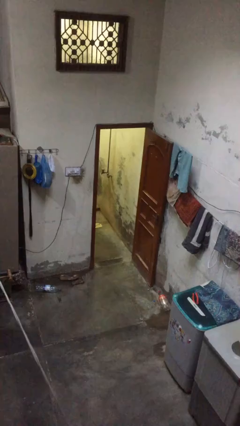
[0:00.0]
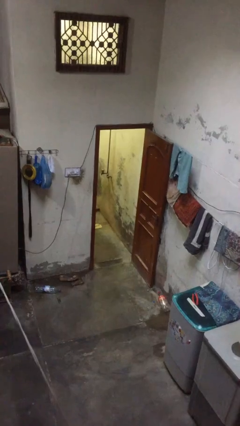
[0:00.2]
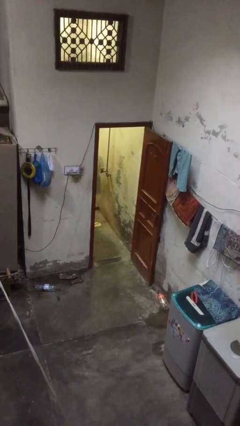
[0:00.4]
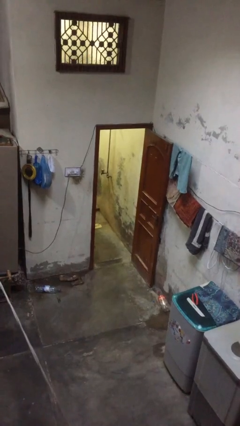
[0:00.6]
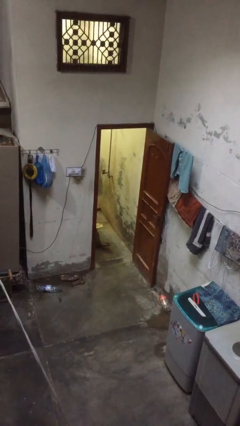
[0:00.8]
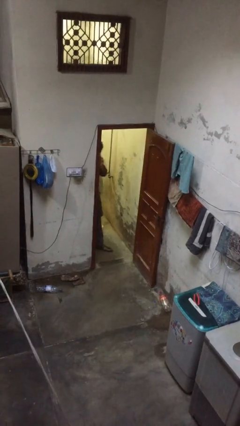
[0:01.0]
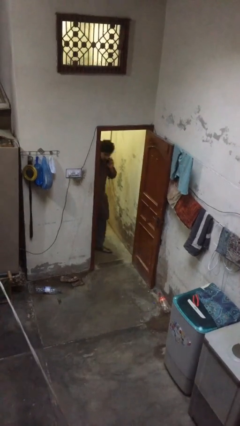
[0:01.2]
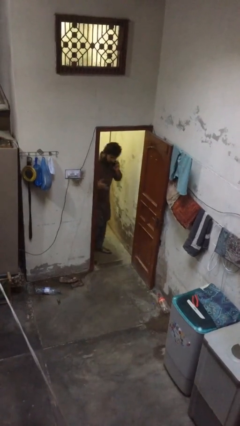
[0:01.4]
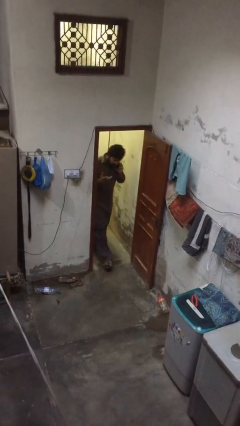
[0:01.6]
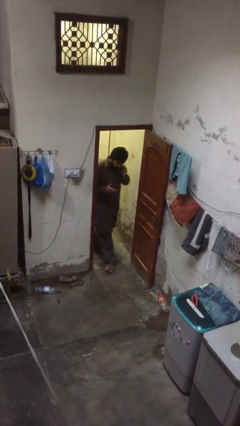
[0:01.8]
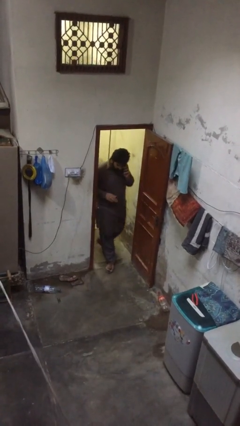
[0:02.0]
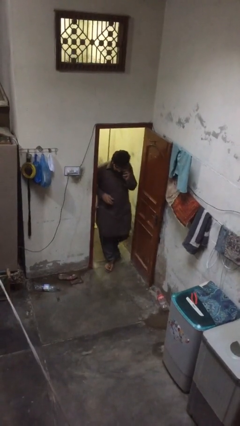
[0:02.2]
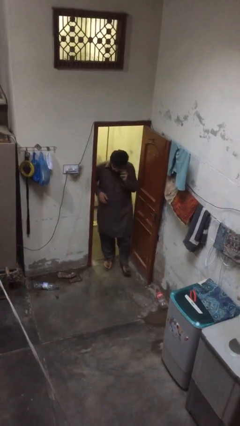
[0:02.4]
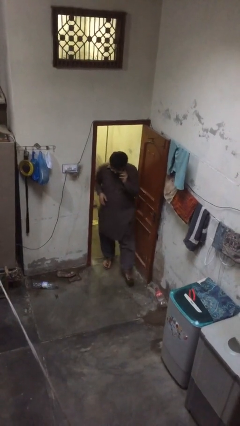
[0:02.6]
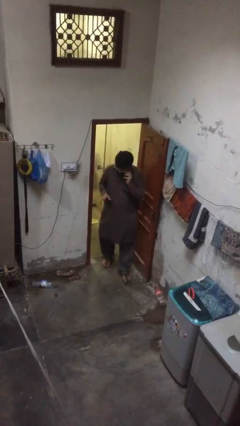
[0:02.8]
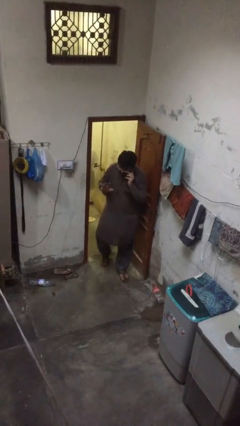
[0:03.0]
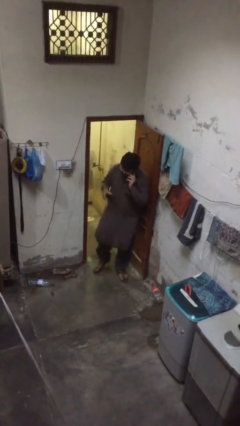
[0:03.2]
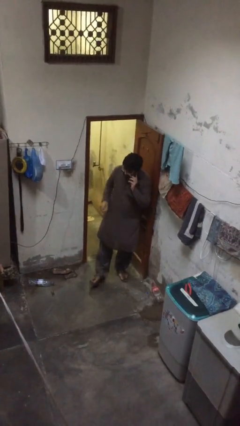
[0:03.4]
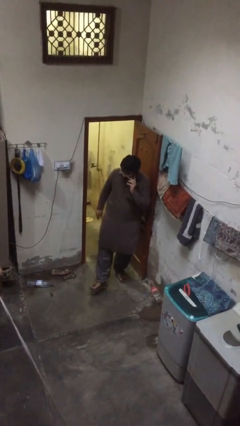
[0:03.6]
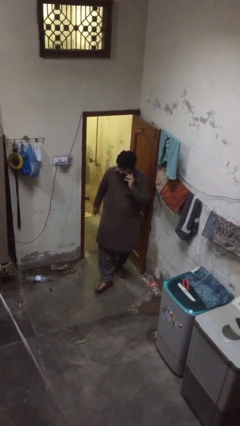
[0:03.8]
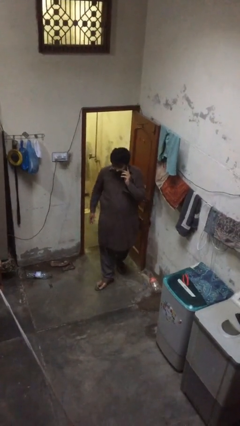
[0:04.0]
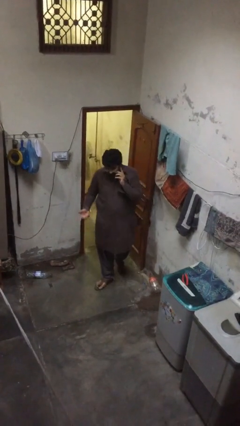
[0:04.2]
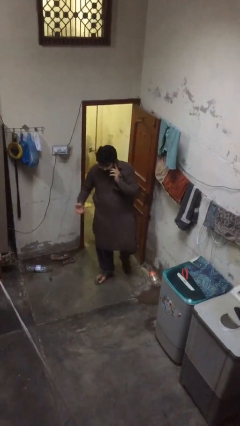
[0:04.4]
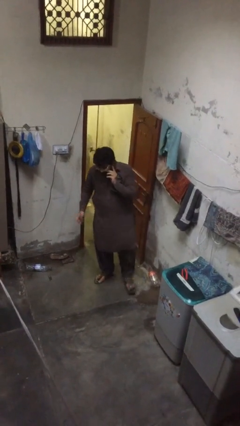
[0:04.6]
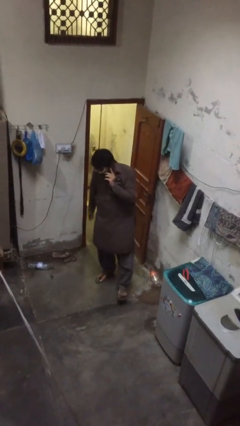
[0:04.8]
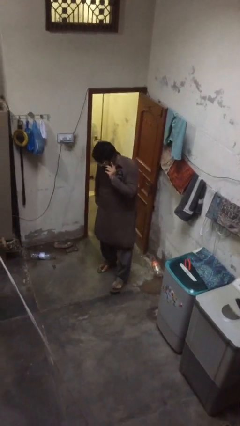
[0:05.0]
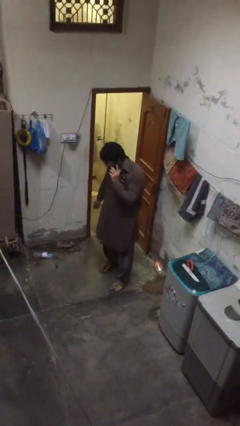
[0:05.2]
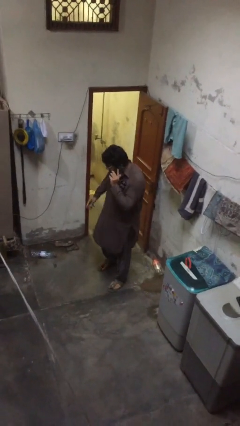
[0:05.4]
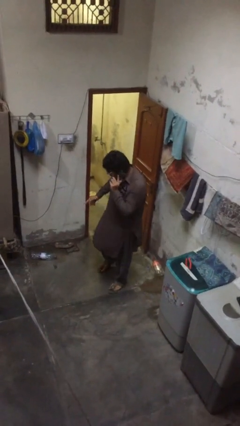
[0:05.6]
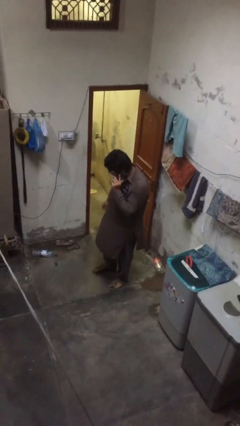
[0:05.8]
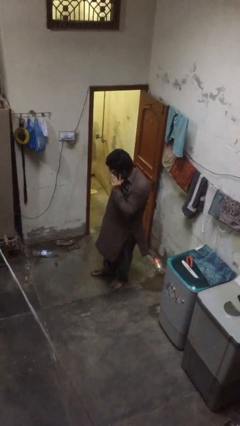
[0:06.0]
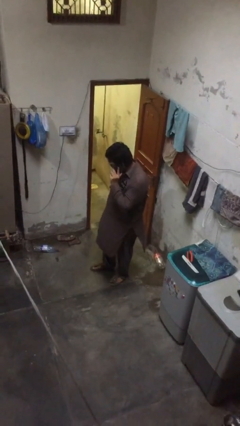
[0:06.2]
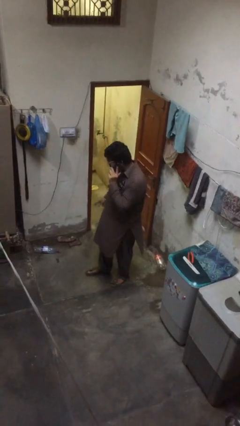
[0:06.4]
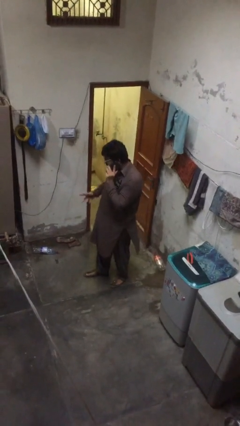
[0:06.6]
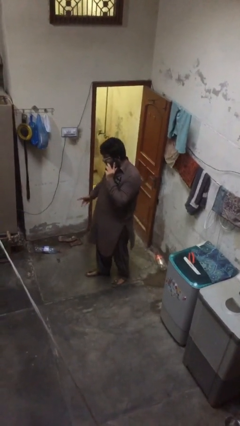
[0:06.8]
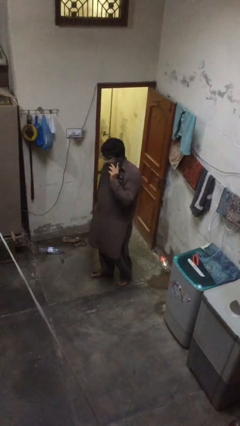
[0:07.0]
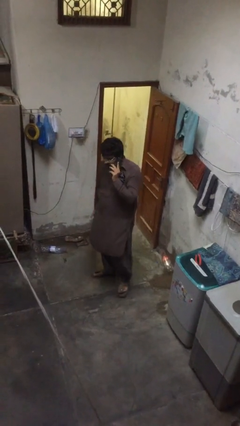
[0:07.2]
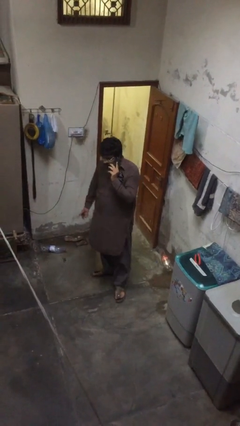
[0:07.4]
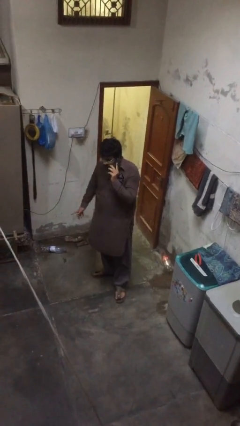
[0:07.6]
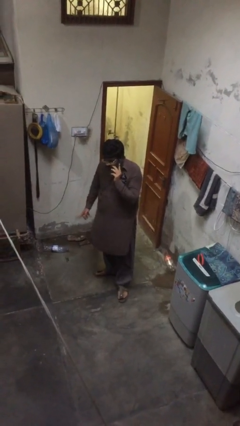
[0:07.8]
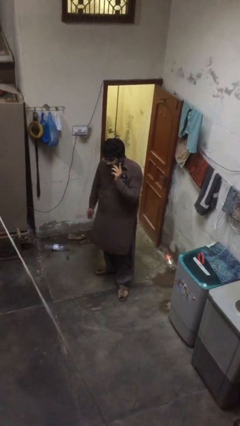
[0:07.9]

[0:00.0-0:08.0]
person enters scene through structure

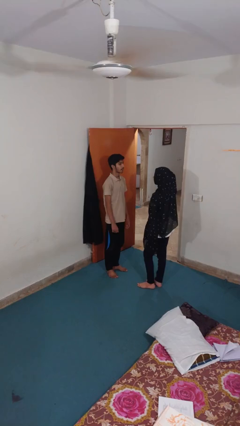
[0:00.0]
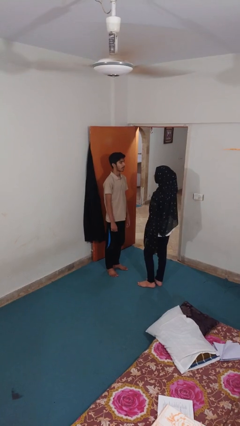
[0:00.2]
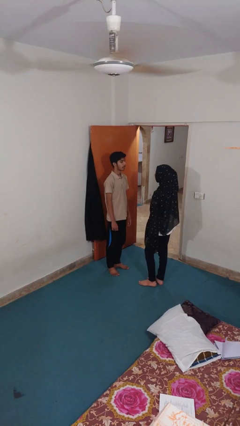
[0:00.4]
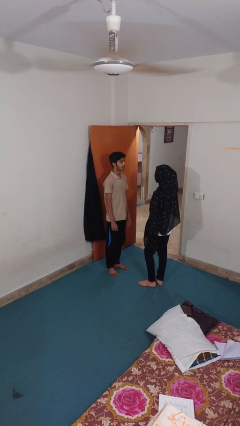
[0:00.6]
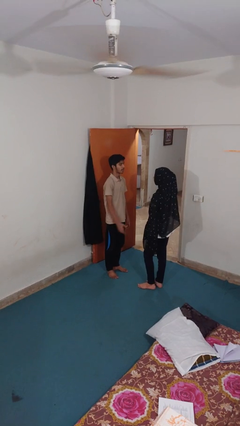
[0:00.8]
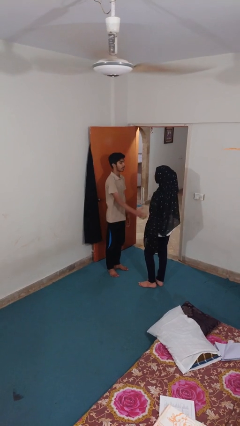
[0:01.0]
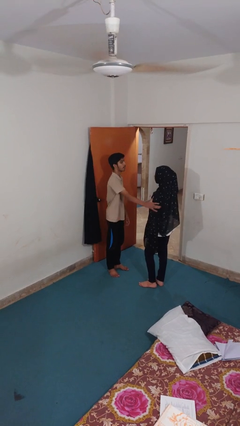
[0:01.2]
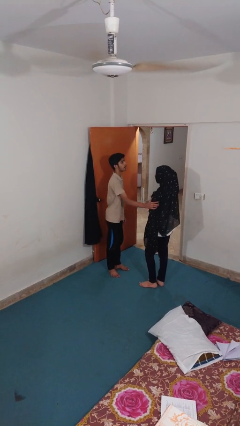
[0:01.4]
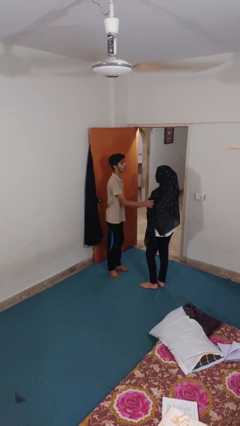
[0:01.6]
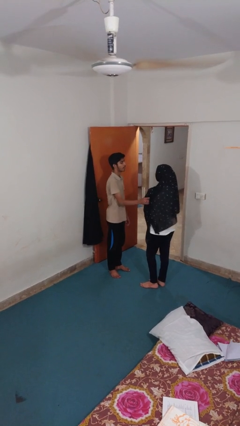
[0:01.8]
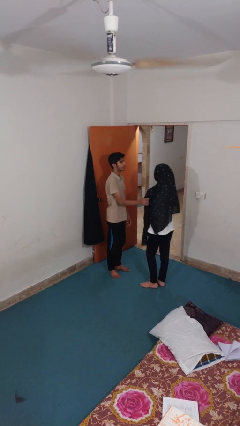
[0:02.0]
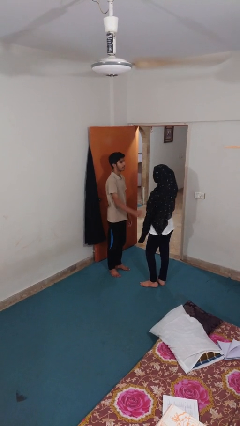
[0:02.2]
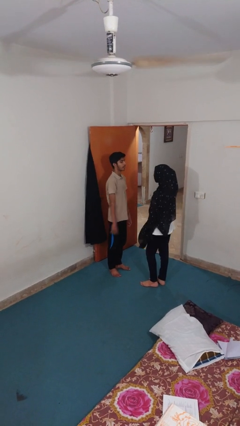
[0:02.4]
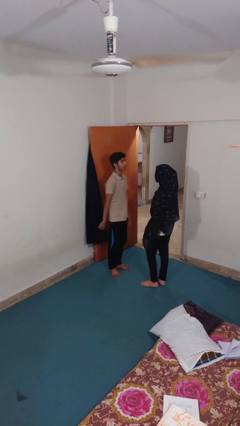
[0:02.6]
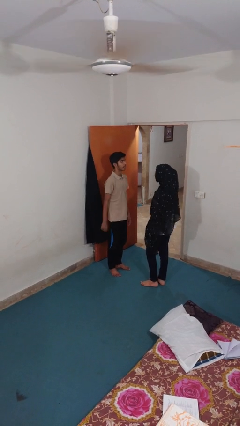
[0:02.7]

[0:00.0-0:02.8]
person grabs person by bicep

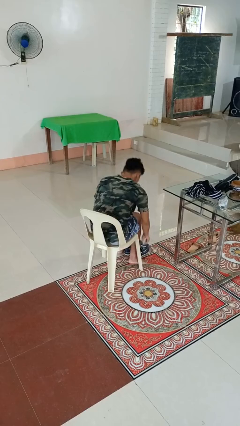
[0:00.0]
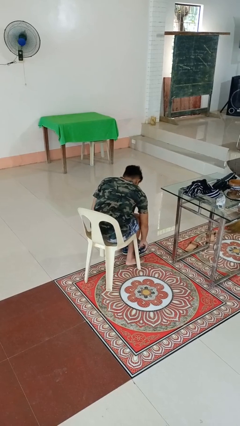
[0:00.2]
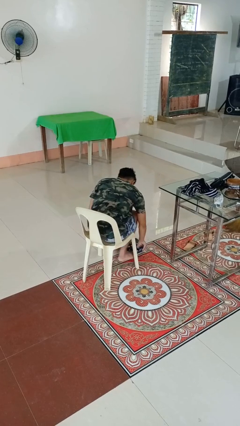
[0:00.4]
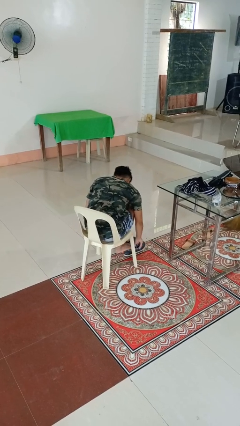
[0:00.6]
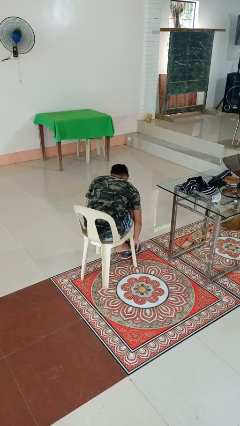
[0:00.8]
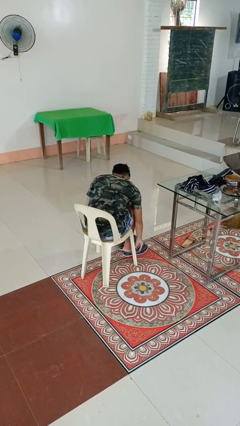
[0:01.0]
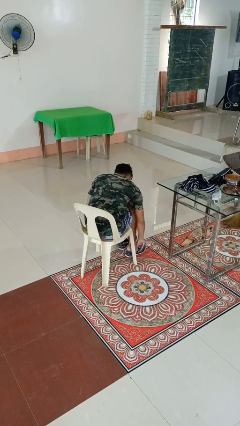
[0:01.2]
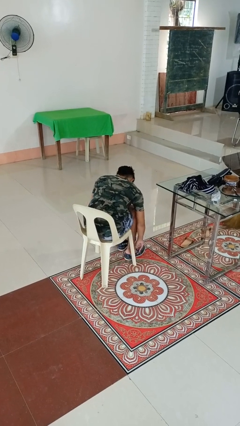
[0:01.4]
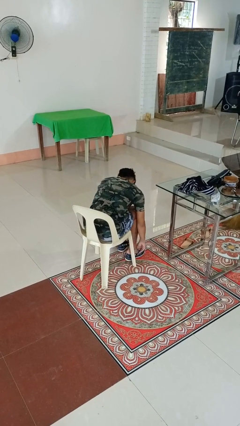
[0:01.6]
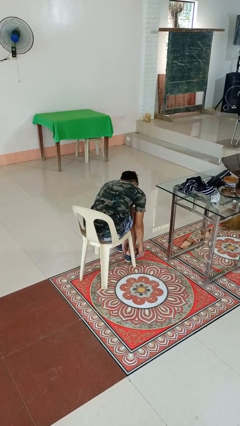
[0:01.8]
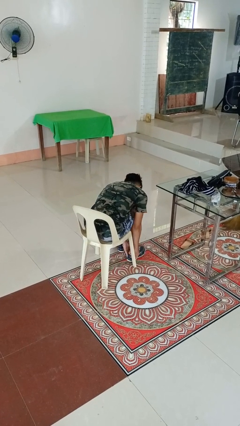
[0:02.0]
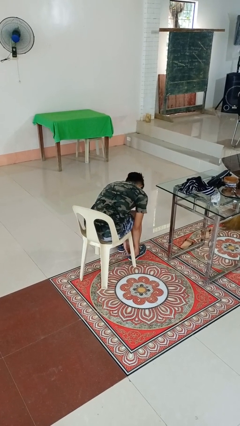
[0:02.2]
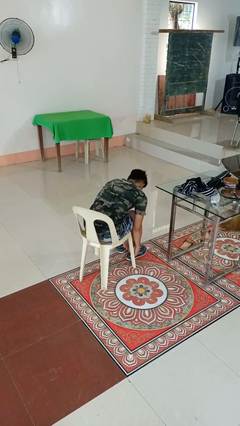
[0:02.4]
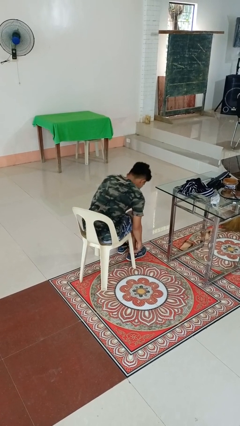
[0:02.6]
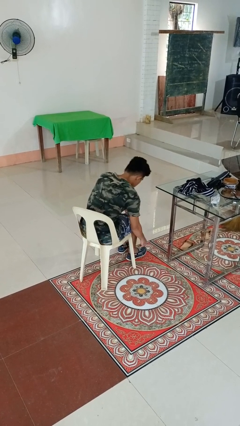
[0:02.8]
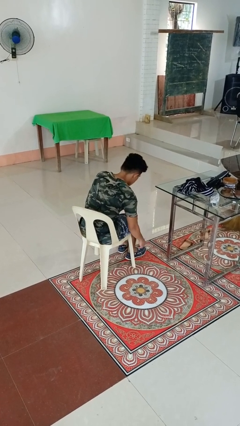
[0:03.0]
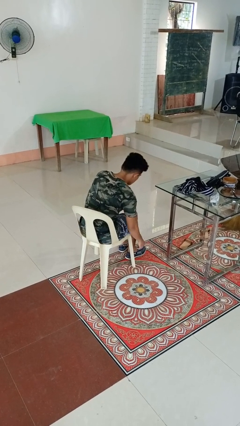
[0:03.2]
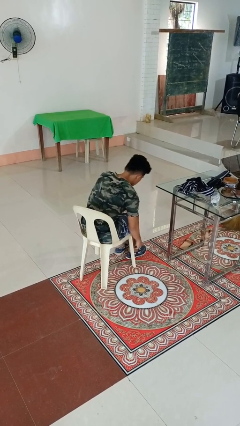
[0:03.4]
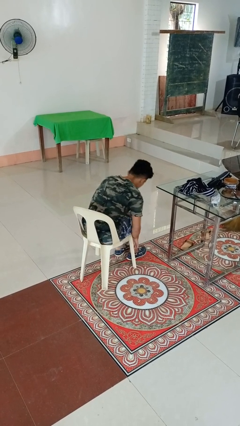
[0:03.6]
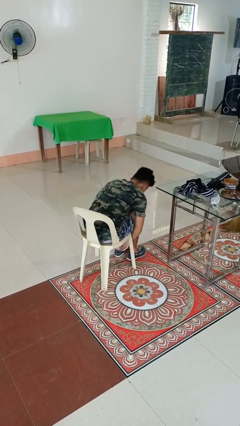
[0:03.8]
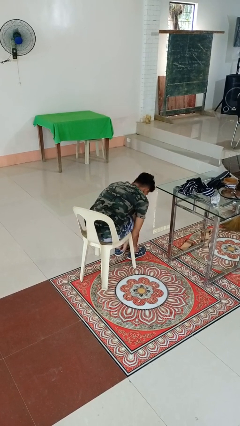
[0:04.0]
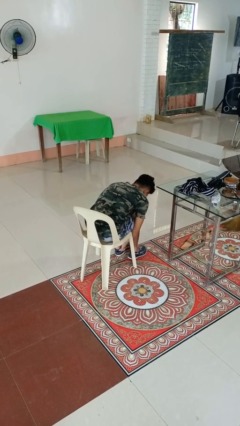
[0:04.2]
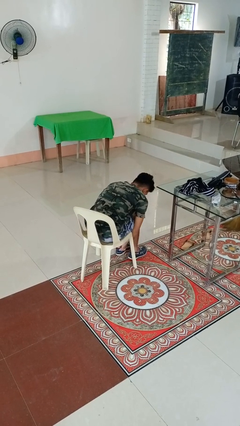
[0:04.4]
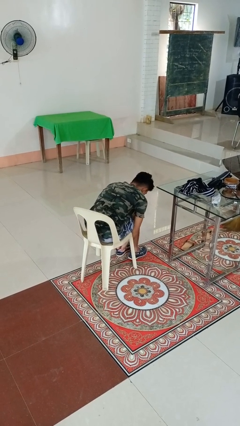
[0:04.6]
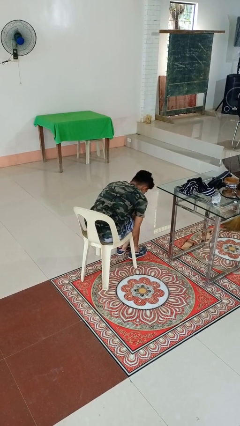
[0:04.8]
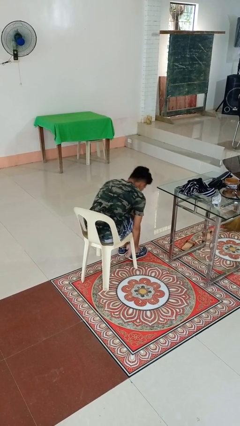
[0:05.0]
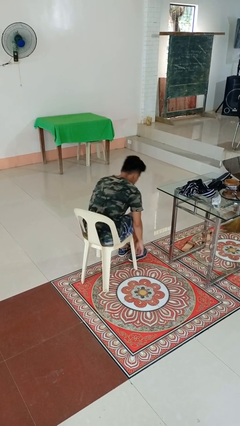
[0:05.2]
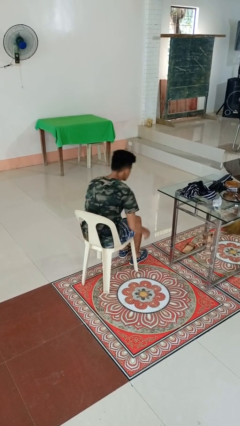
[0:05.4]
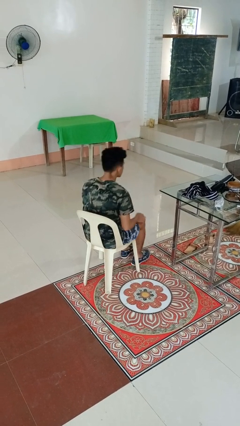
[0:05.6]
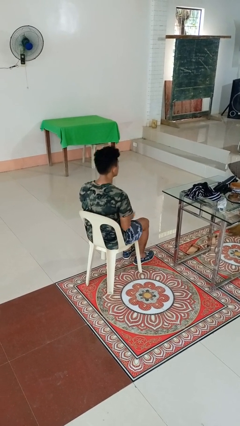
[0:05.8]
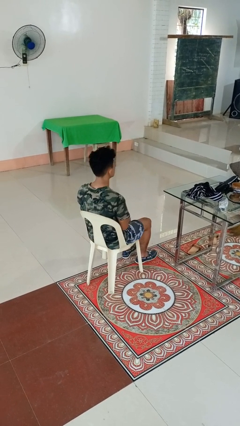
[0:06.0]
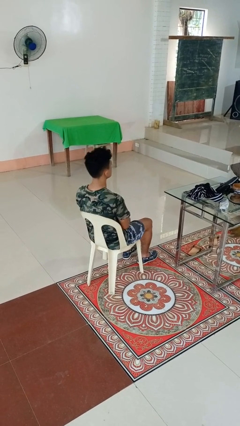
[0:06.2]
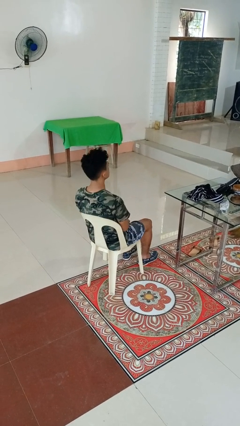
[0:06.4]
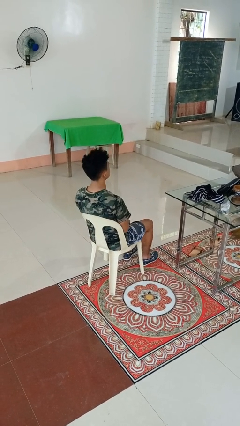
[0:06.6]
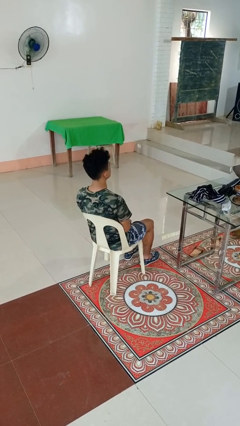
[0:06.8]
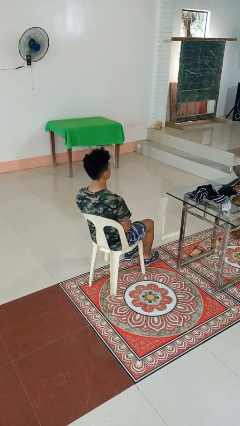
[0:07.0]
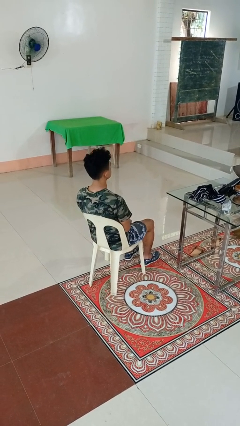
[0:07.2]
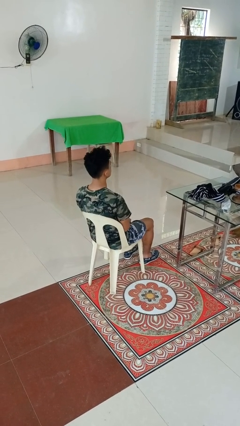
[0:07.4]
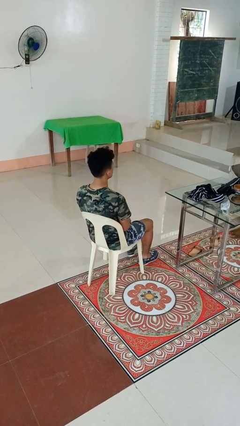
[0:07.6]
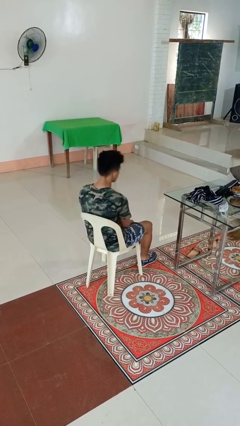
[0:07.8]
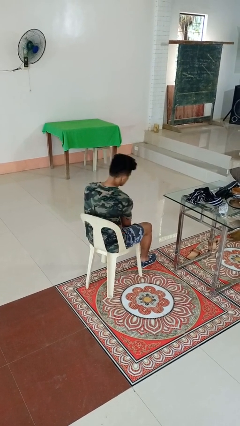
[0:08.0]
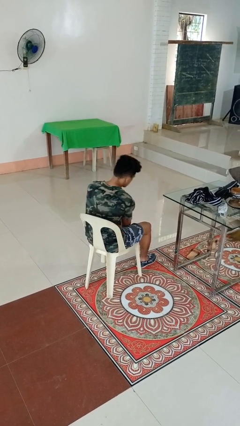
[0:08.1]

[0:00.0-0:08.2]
person puts on shoes
